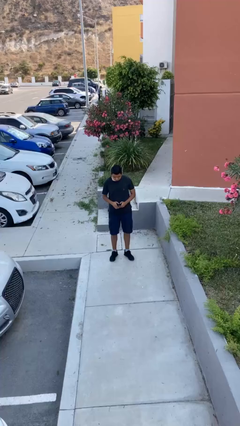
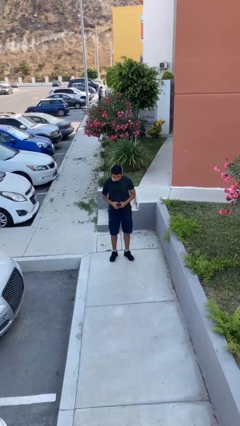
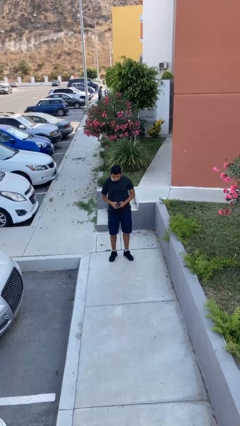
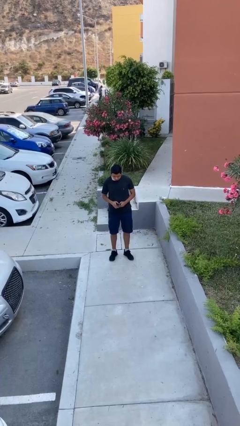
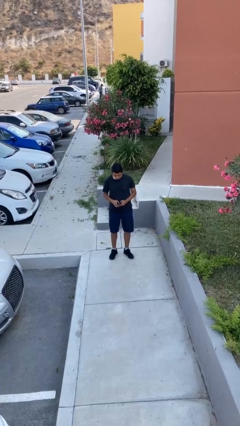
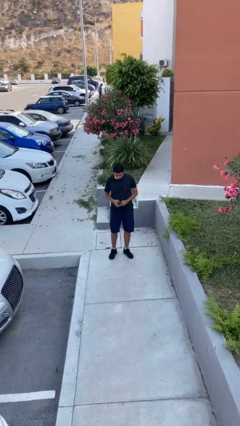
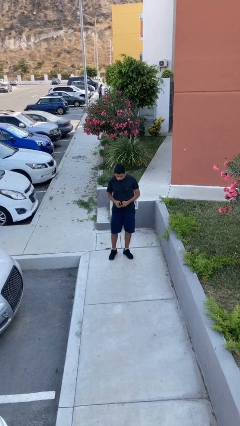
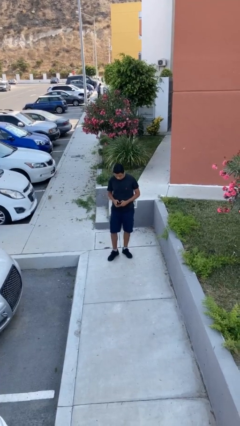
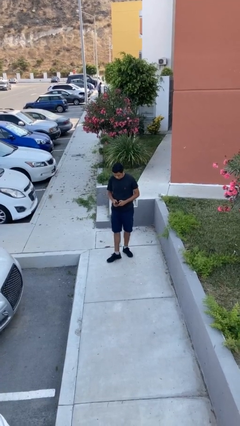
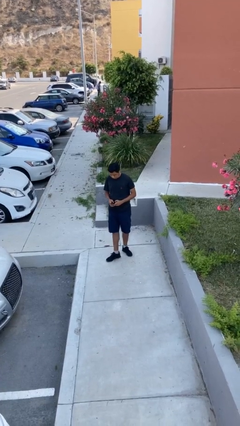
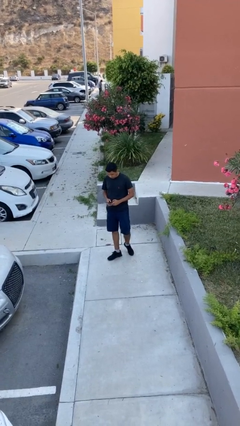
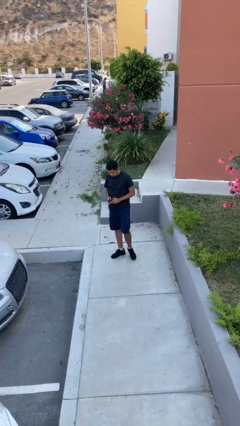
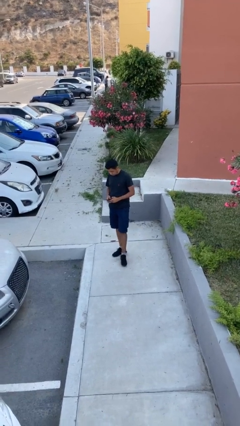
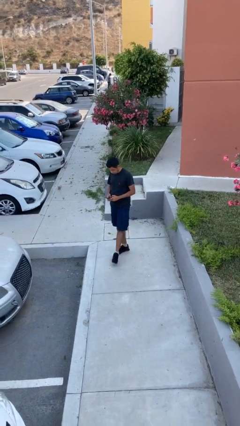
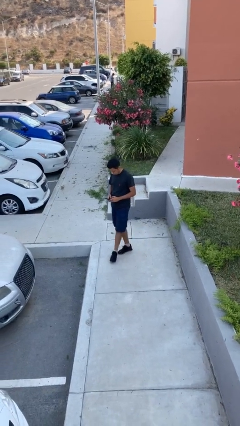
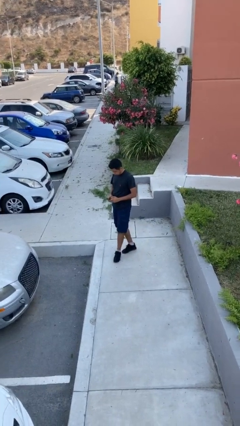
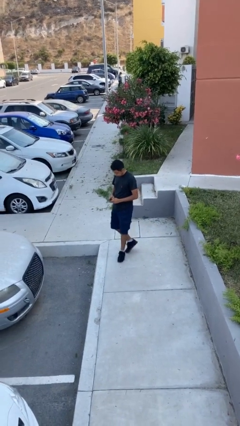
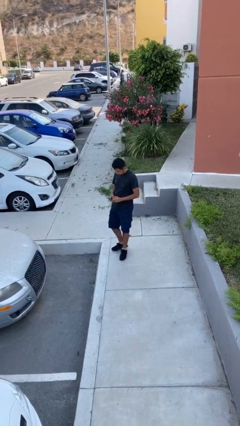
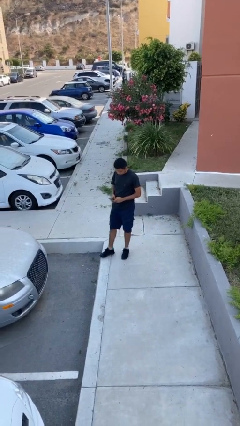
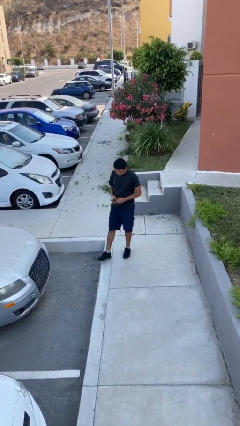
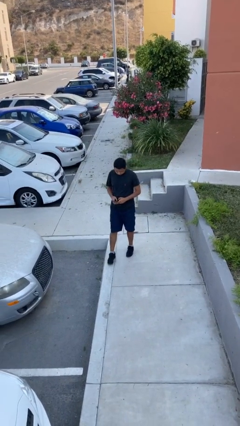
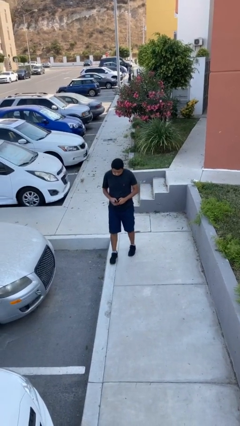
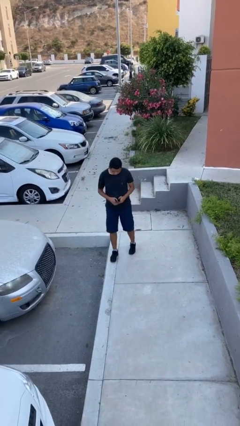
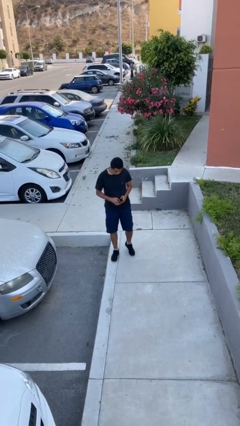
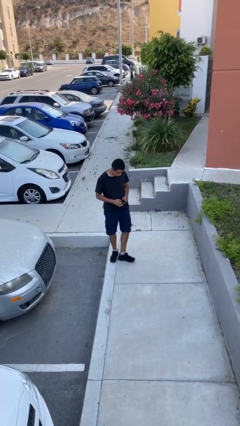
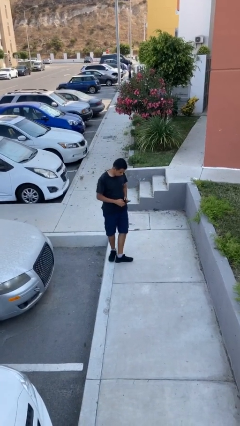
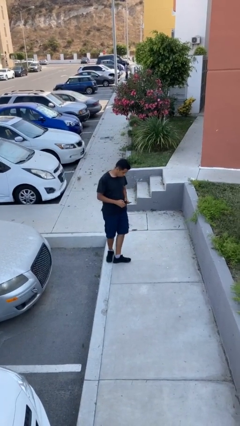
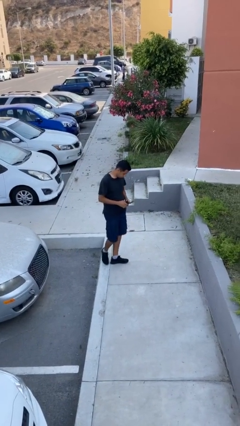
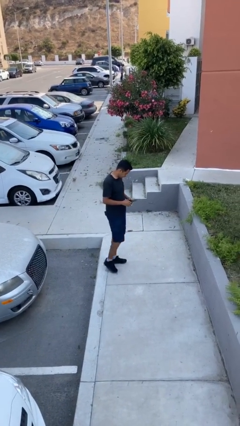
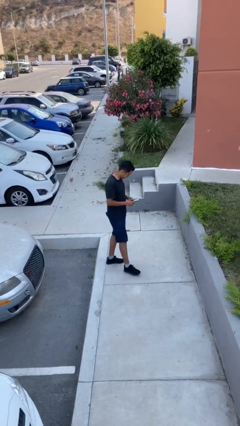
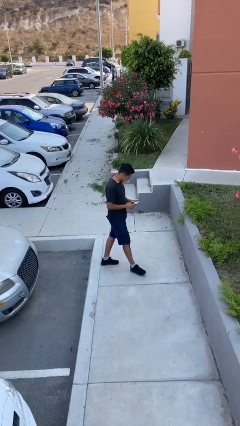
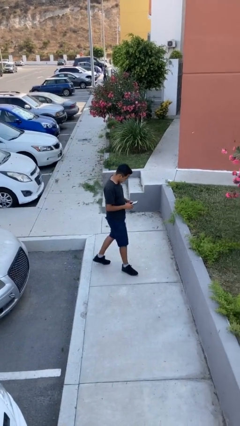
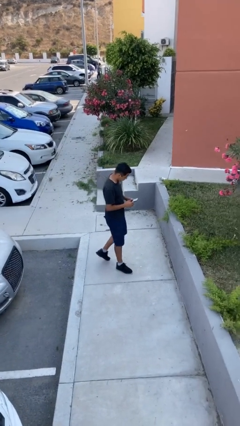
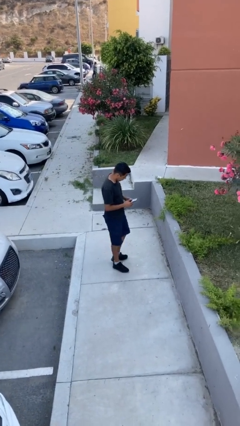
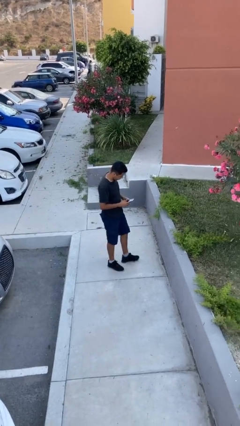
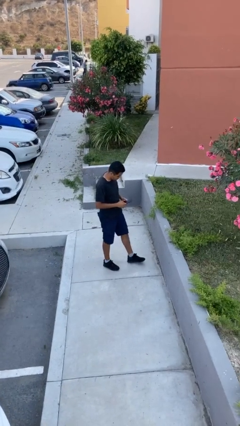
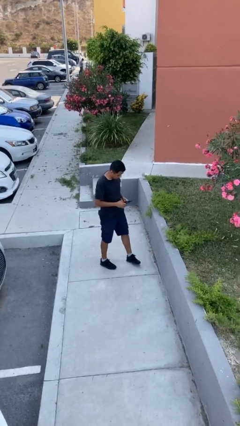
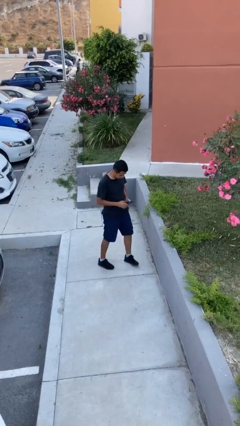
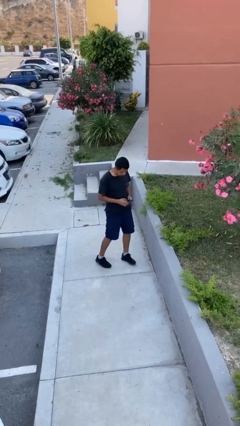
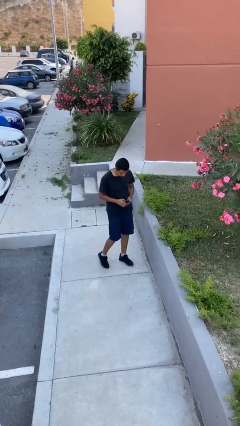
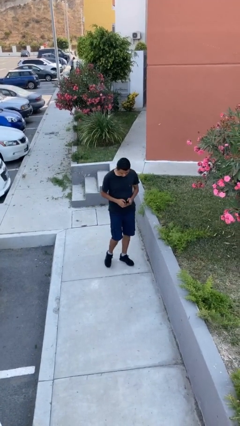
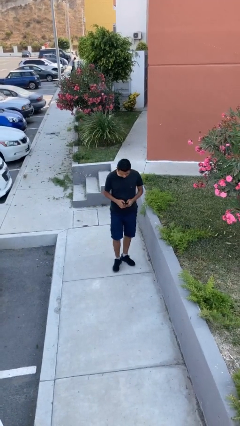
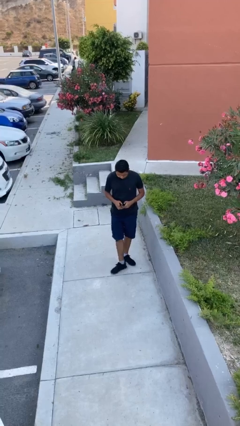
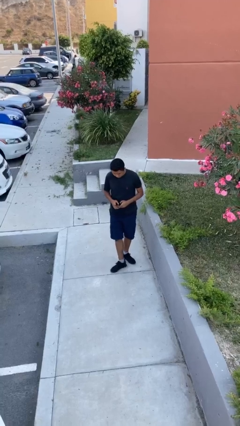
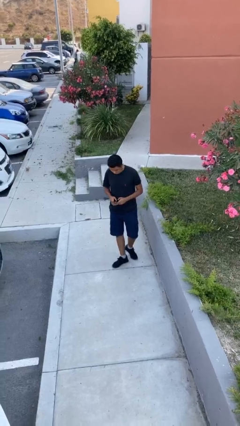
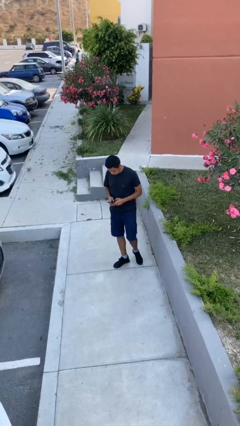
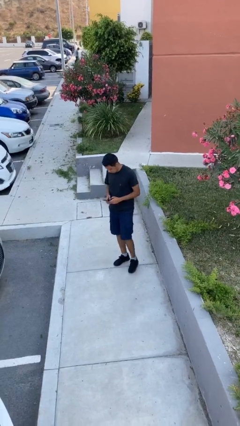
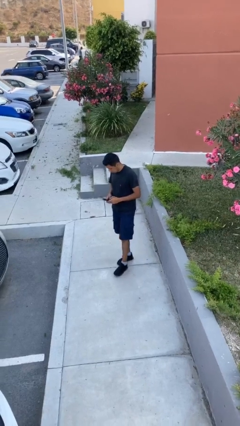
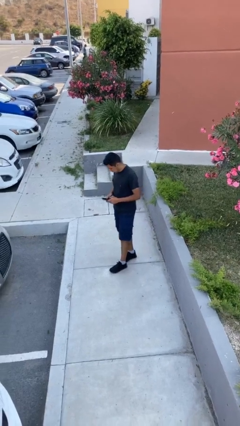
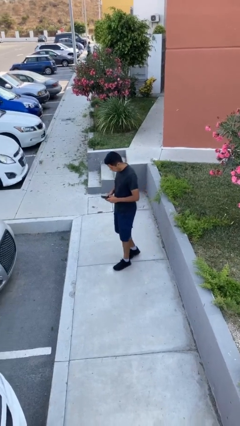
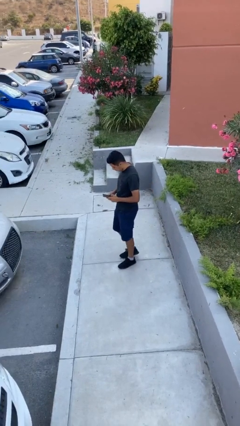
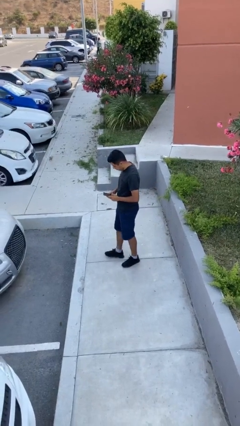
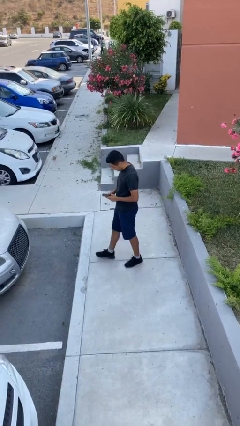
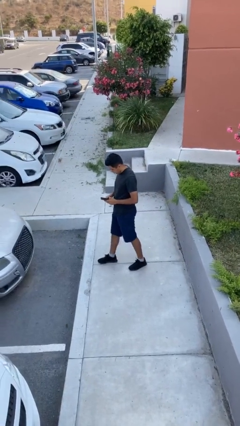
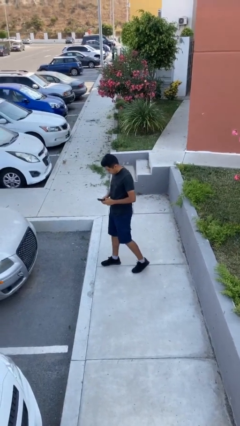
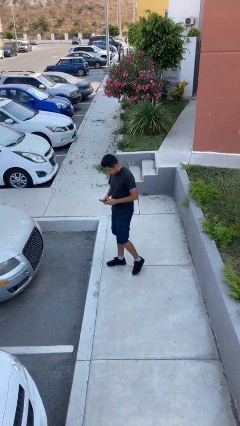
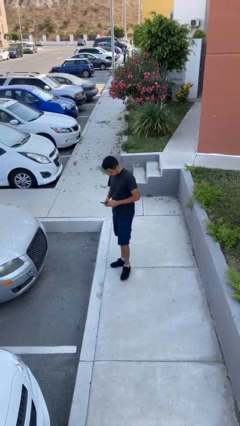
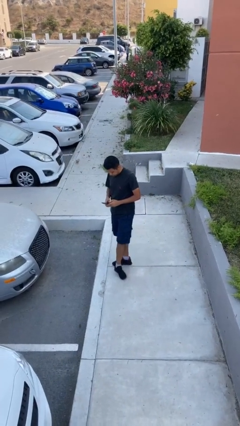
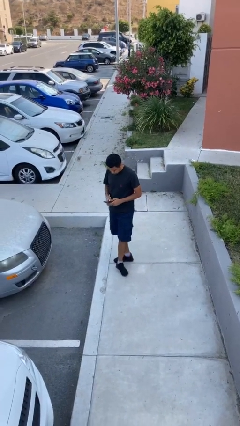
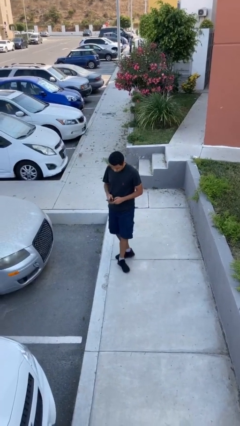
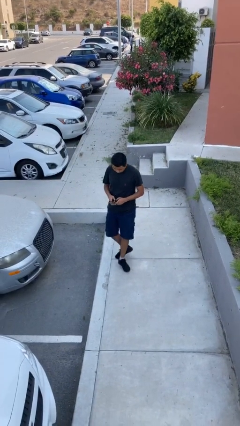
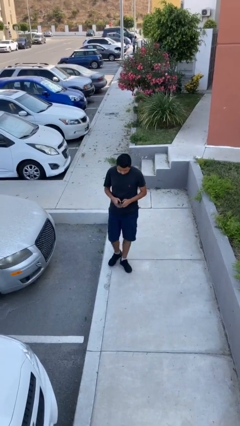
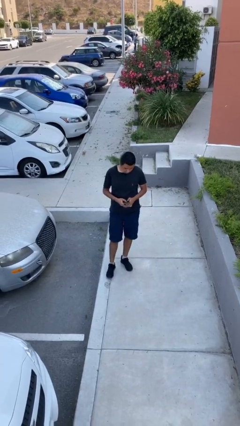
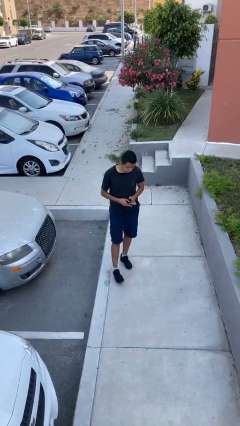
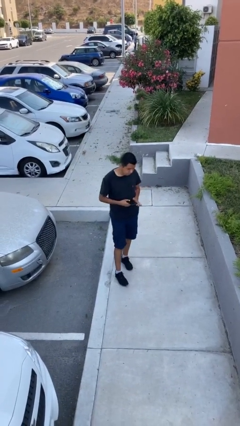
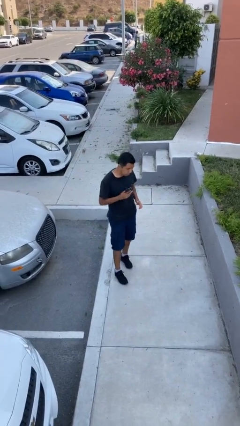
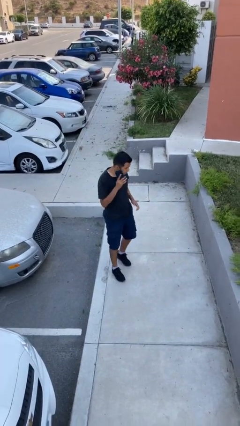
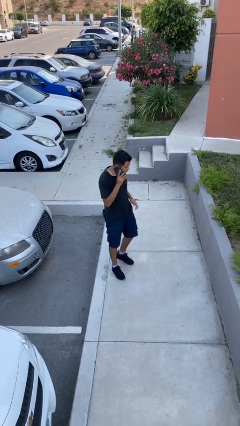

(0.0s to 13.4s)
person texts on phone

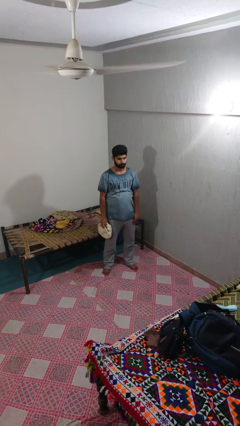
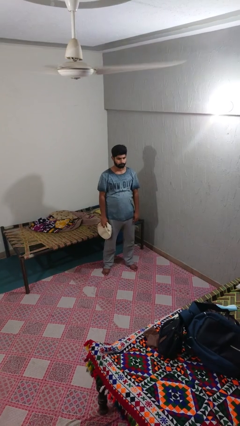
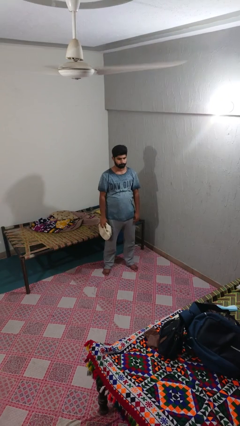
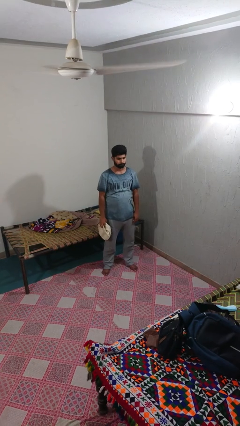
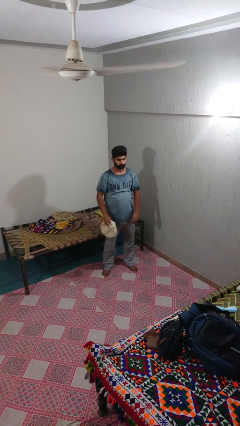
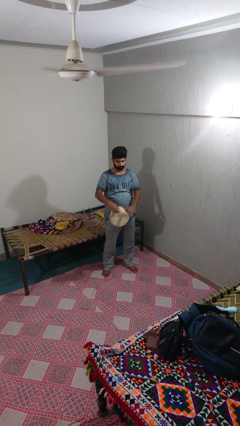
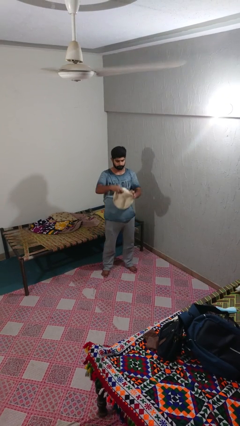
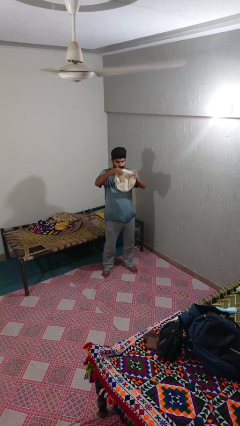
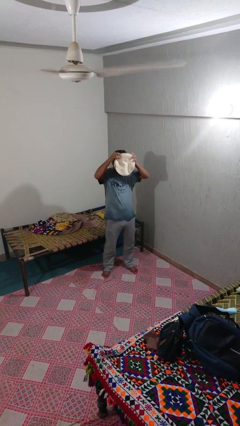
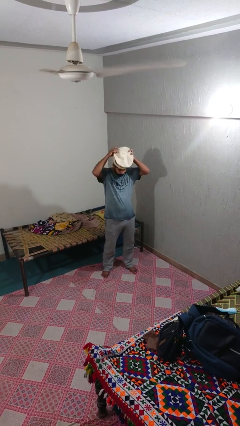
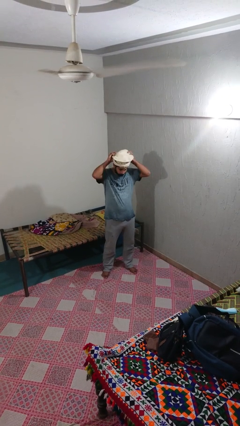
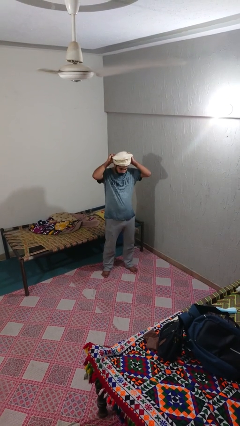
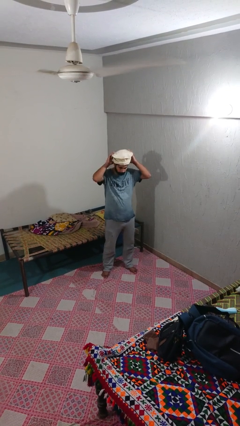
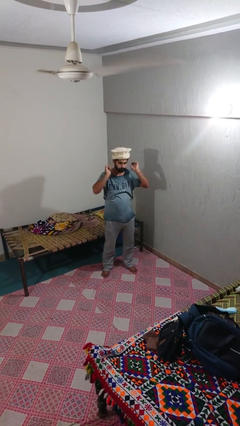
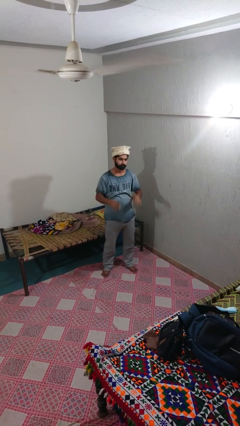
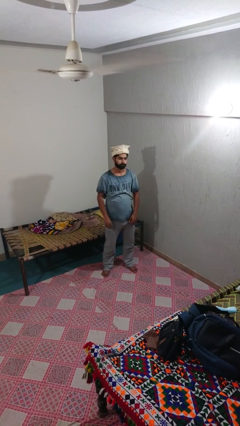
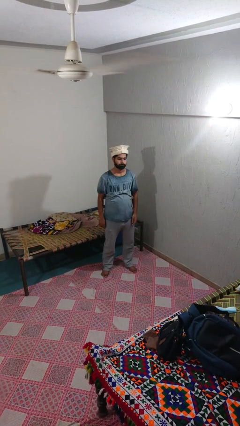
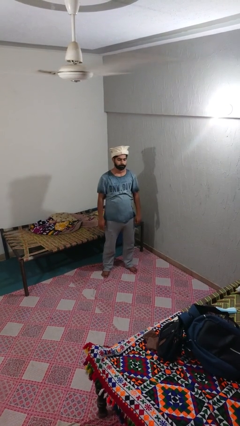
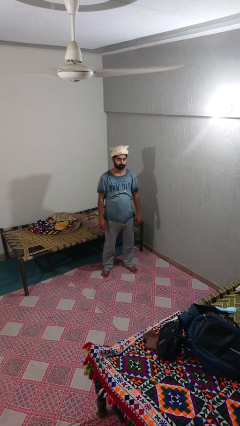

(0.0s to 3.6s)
person puts on hat

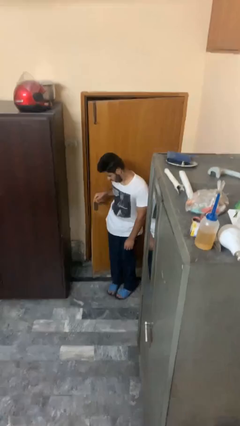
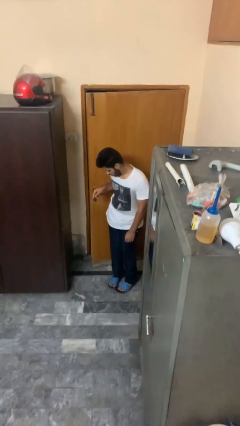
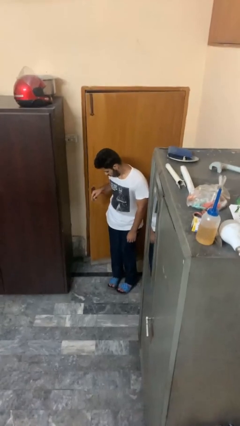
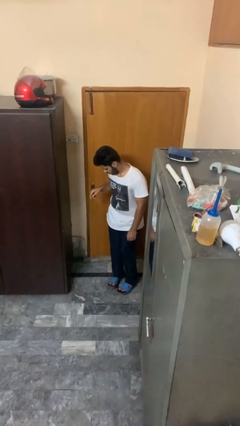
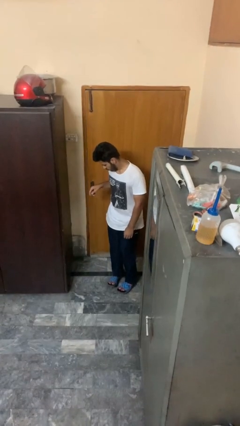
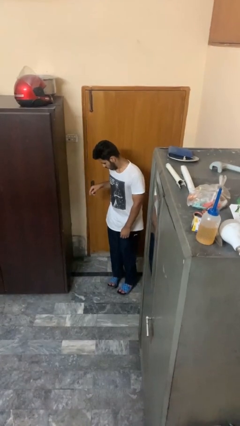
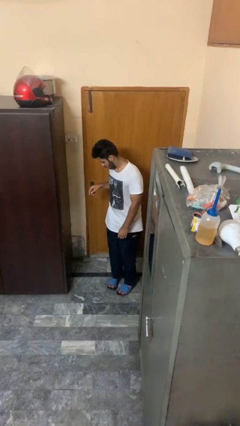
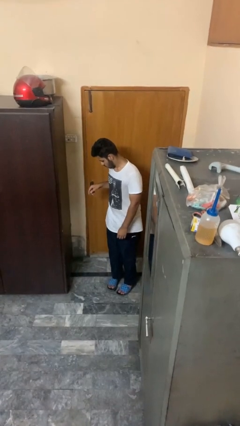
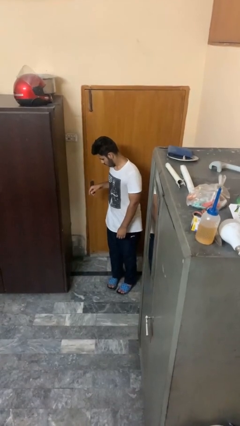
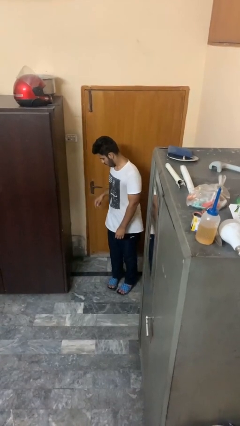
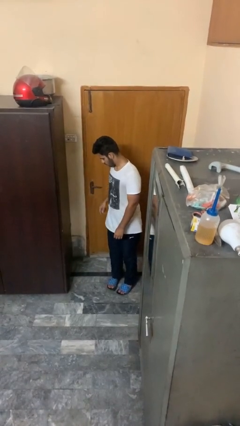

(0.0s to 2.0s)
person closes door with hip
